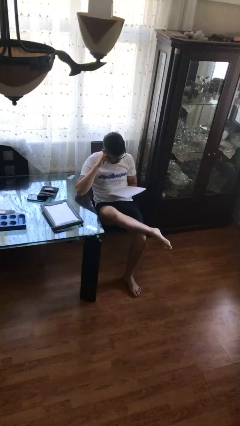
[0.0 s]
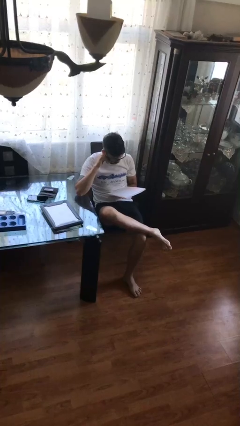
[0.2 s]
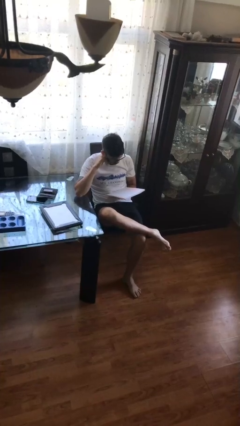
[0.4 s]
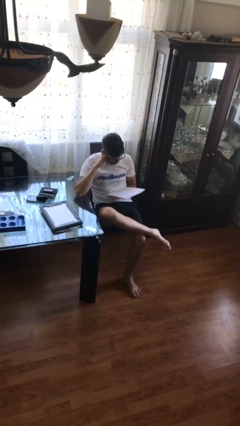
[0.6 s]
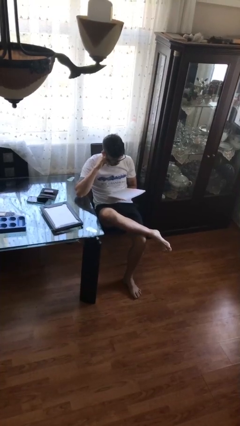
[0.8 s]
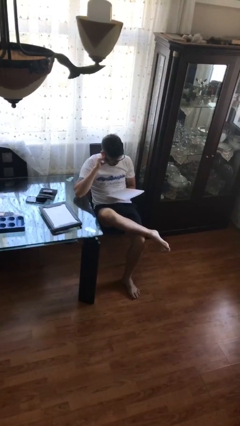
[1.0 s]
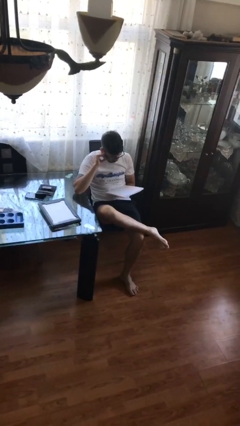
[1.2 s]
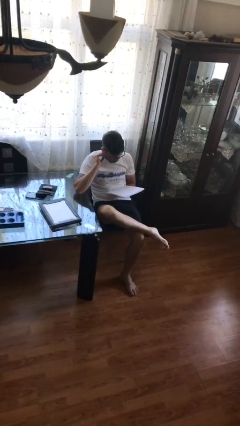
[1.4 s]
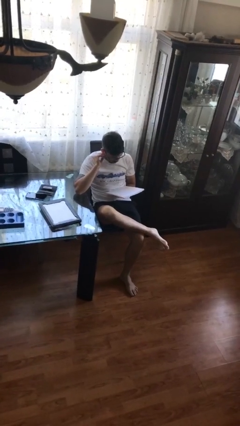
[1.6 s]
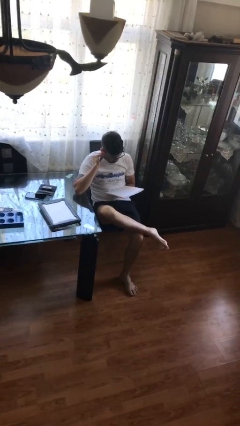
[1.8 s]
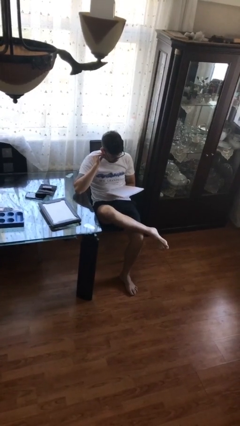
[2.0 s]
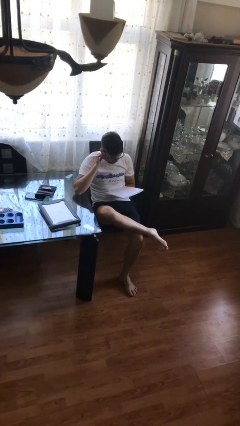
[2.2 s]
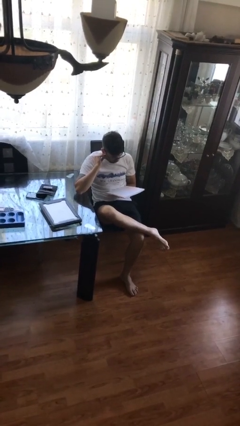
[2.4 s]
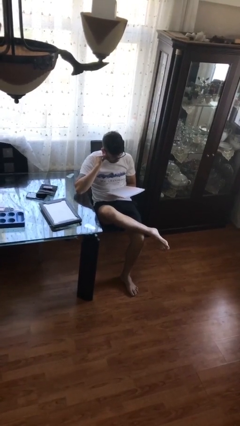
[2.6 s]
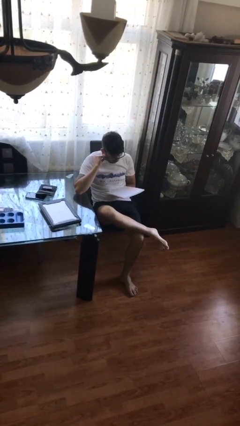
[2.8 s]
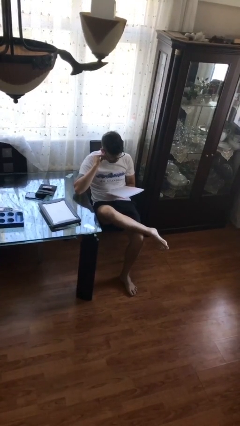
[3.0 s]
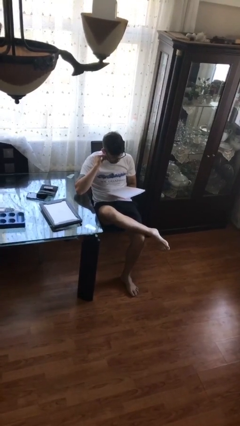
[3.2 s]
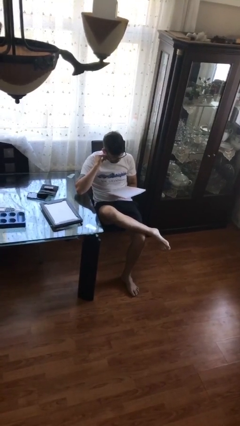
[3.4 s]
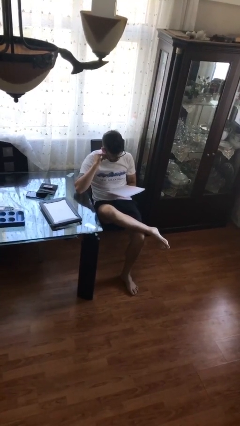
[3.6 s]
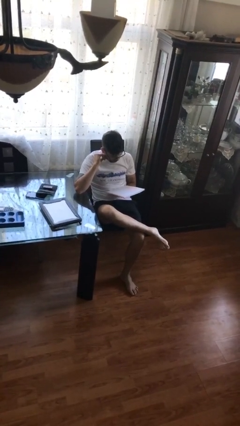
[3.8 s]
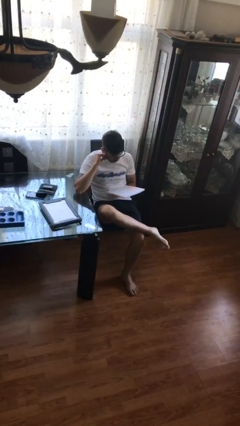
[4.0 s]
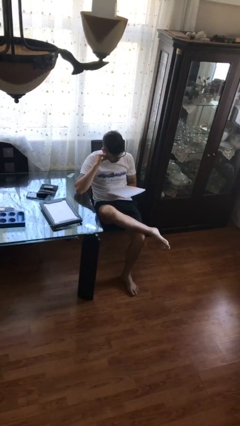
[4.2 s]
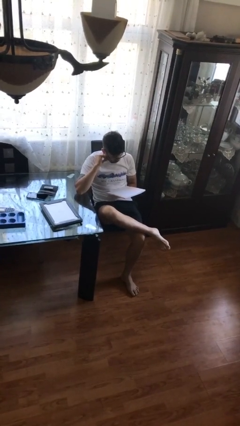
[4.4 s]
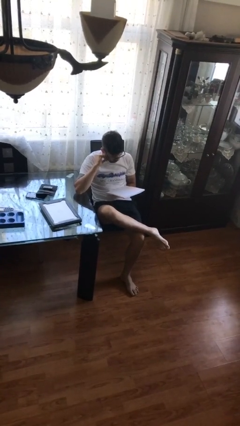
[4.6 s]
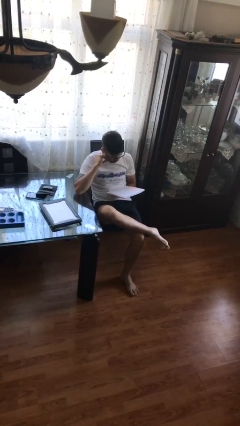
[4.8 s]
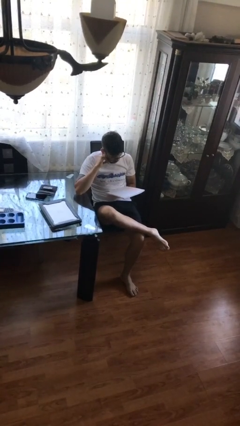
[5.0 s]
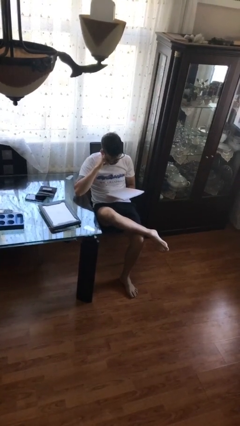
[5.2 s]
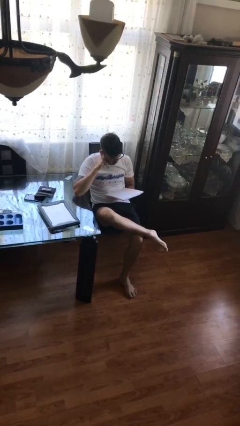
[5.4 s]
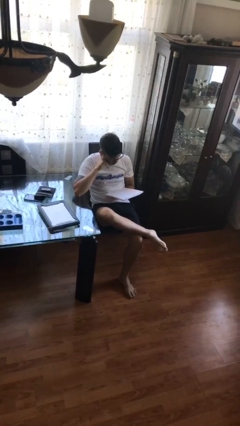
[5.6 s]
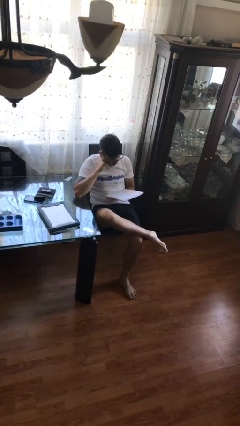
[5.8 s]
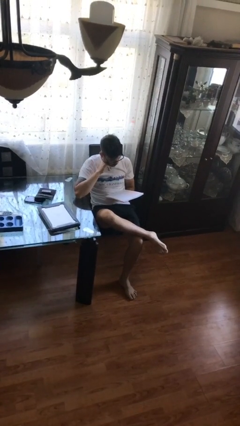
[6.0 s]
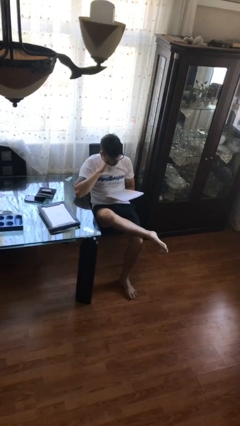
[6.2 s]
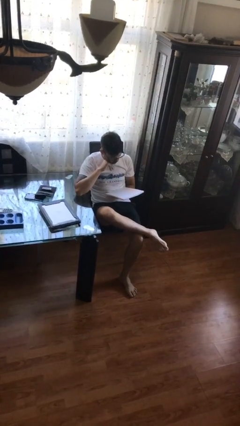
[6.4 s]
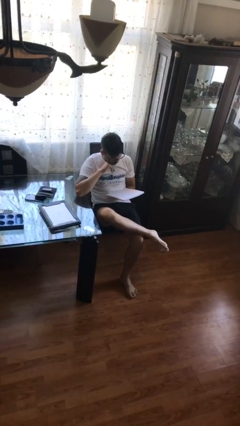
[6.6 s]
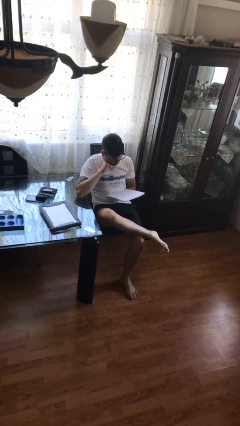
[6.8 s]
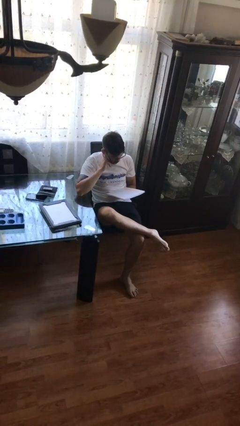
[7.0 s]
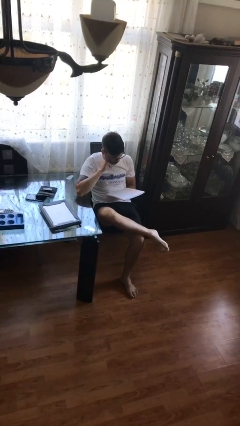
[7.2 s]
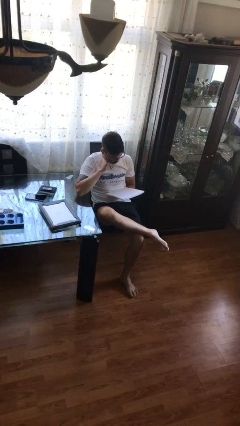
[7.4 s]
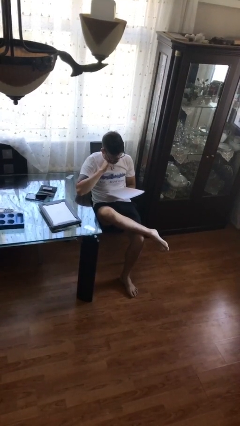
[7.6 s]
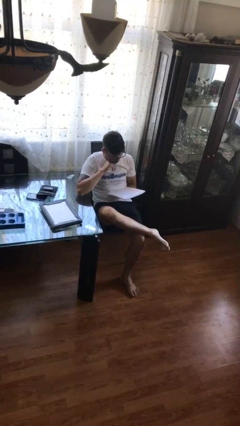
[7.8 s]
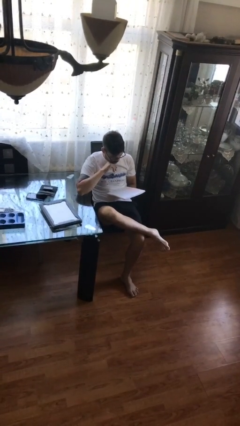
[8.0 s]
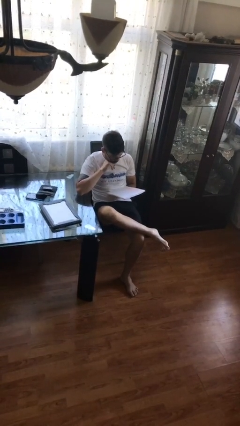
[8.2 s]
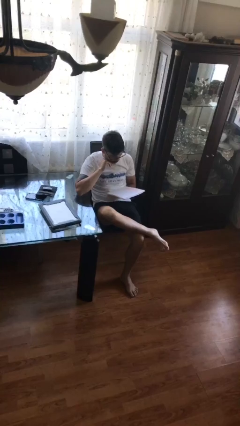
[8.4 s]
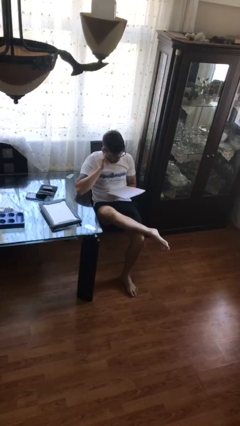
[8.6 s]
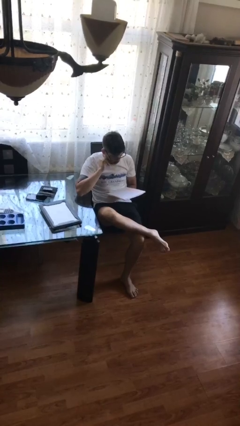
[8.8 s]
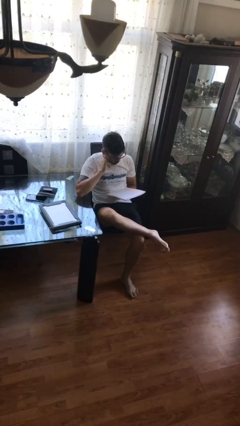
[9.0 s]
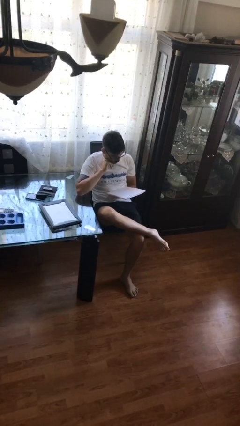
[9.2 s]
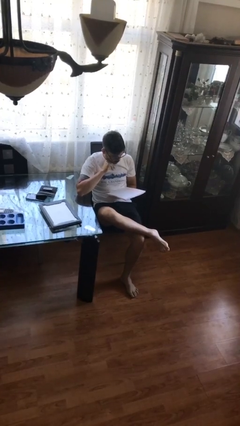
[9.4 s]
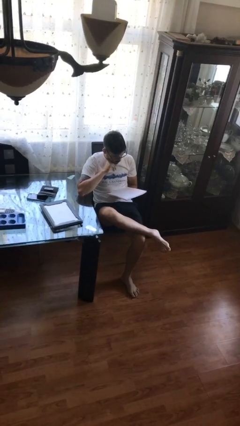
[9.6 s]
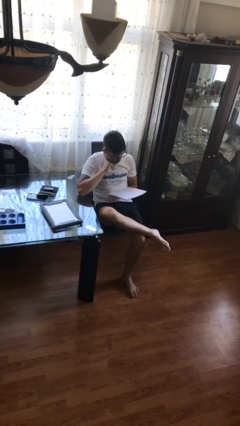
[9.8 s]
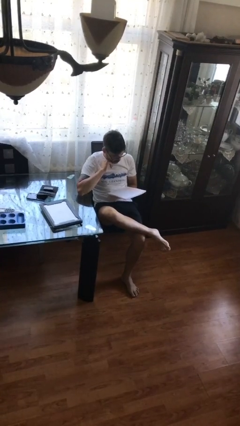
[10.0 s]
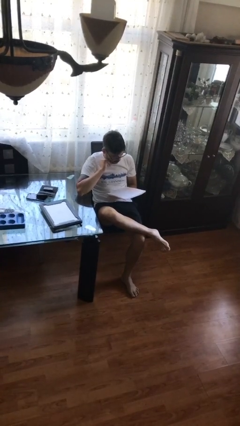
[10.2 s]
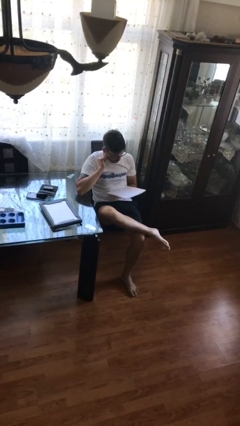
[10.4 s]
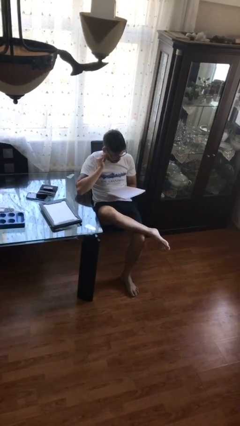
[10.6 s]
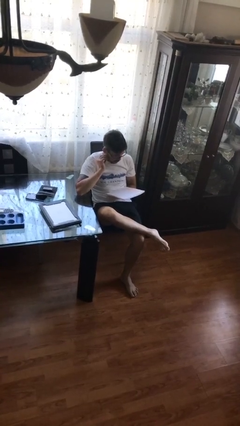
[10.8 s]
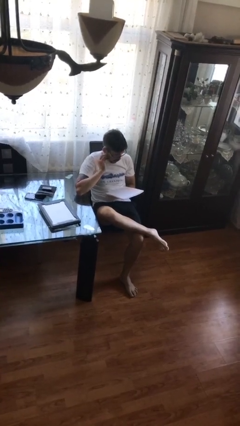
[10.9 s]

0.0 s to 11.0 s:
person reads document

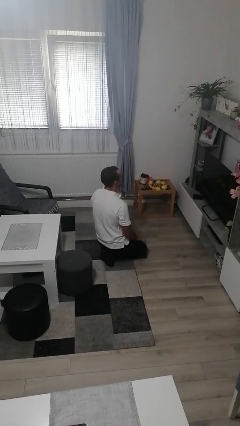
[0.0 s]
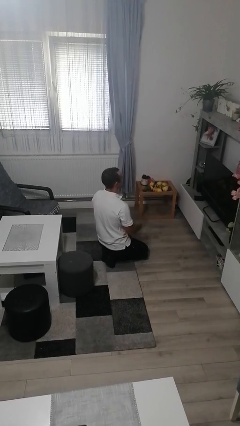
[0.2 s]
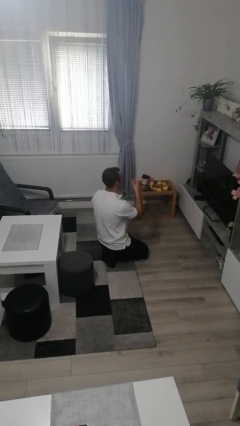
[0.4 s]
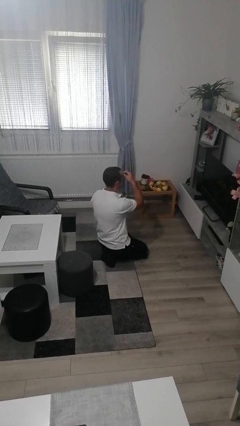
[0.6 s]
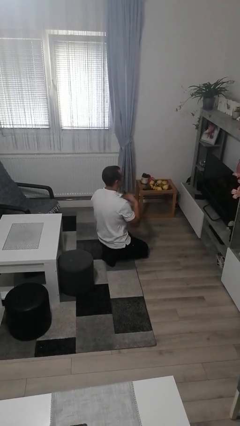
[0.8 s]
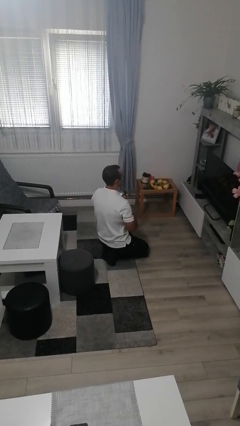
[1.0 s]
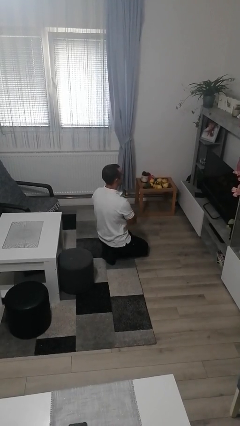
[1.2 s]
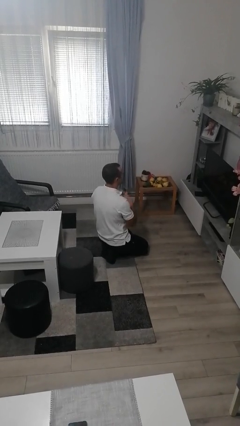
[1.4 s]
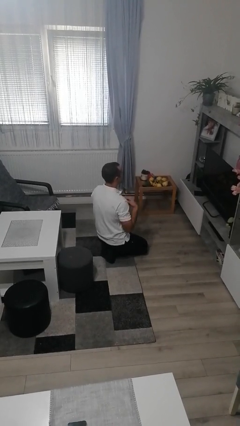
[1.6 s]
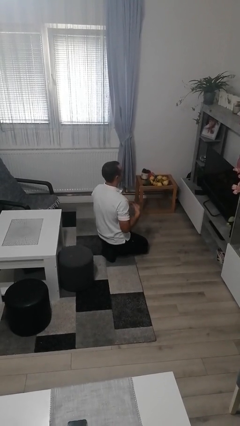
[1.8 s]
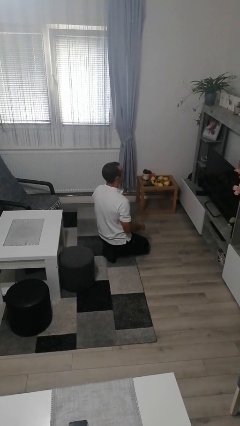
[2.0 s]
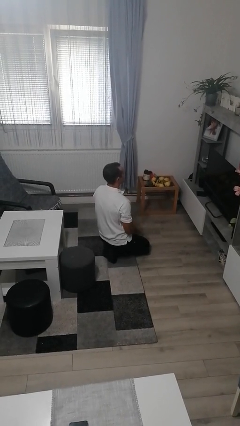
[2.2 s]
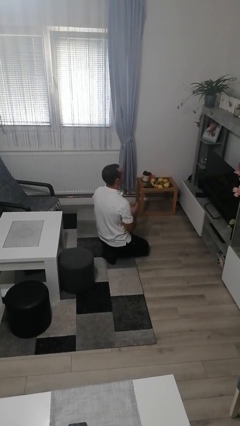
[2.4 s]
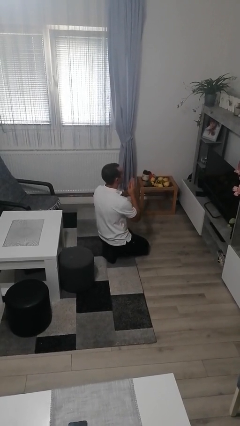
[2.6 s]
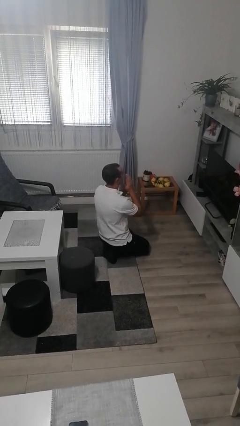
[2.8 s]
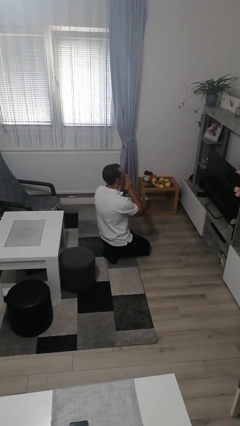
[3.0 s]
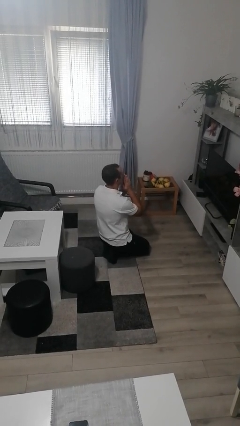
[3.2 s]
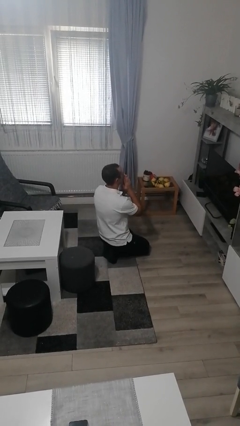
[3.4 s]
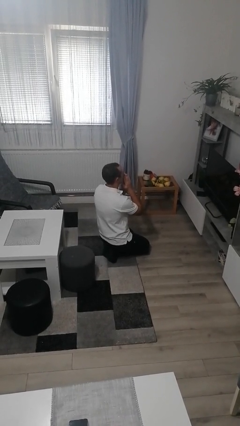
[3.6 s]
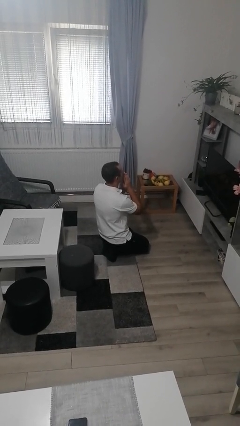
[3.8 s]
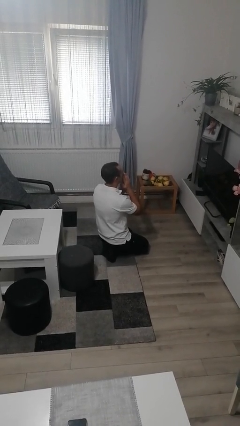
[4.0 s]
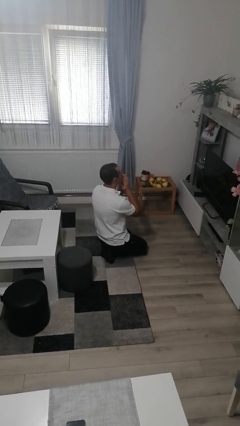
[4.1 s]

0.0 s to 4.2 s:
person prays

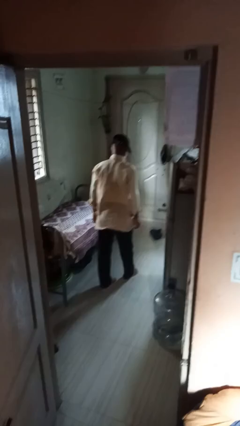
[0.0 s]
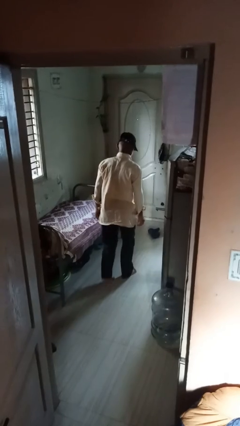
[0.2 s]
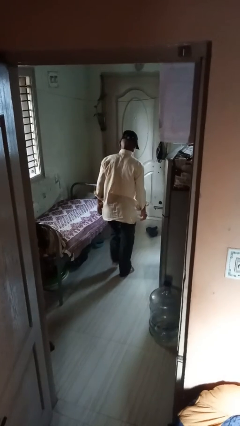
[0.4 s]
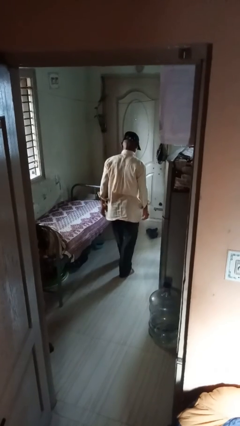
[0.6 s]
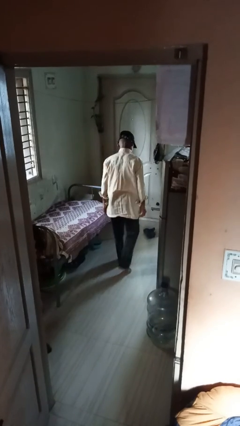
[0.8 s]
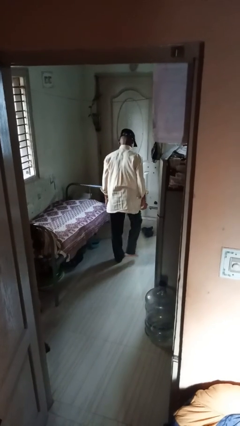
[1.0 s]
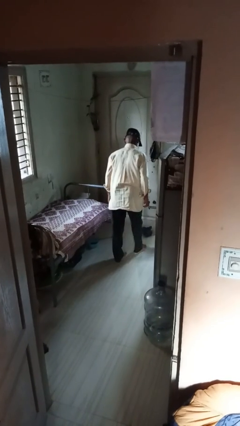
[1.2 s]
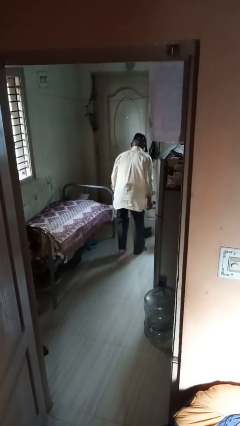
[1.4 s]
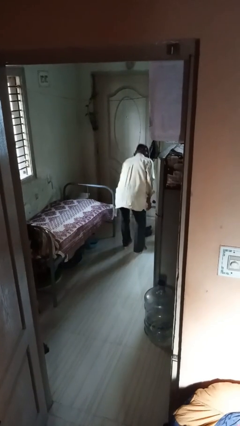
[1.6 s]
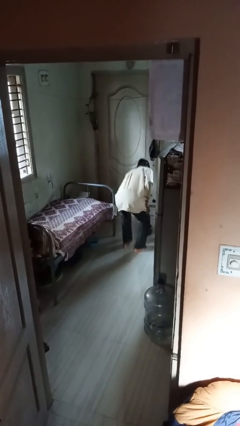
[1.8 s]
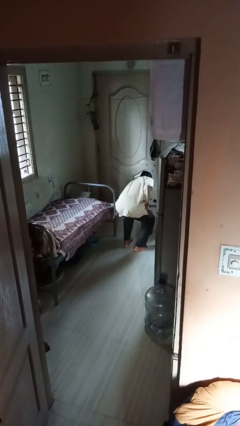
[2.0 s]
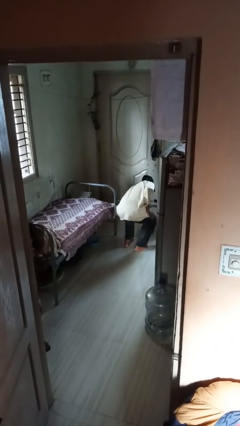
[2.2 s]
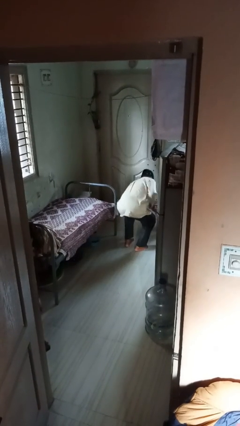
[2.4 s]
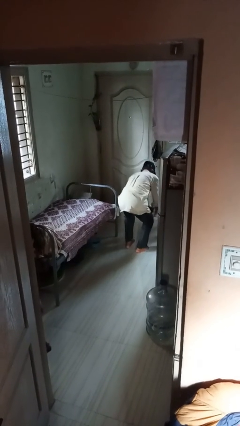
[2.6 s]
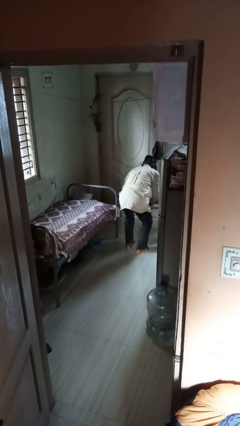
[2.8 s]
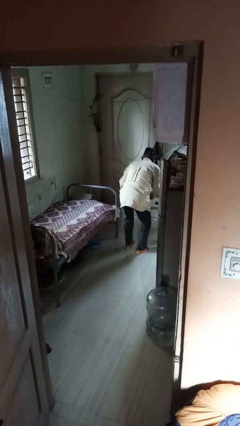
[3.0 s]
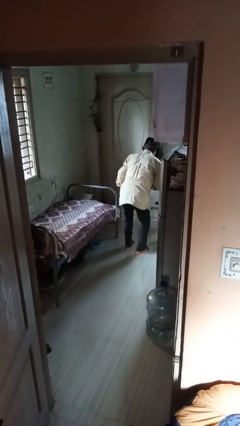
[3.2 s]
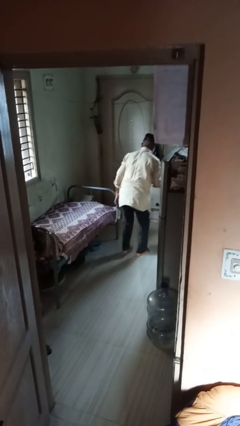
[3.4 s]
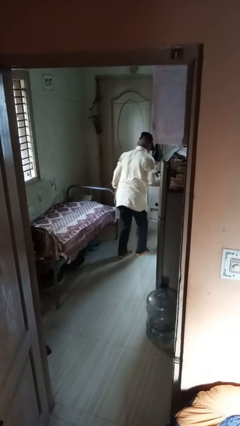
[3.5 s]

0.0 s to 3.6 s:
person picks up object from floor
